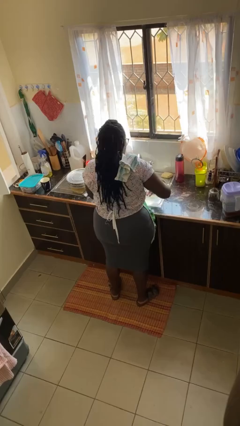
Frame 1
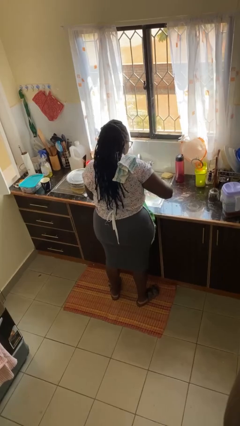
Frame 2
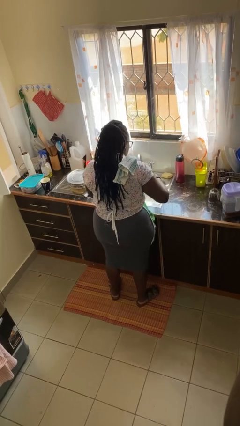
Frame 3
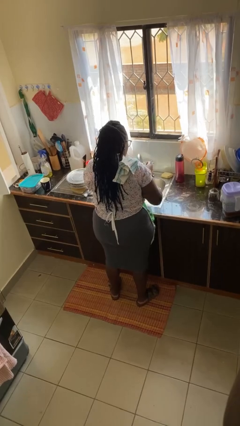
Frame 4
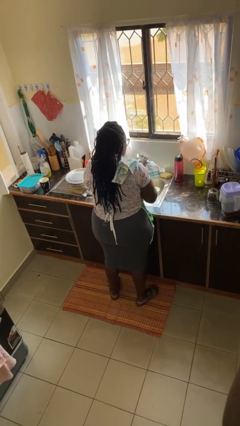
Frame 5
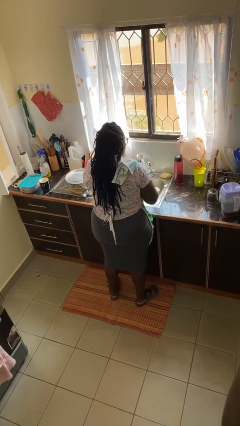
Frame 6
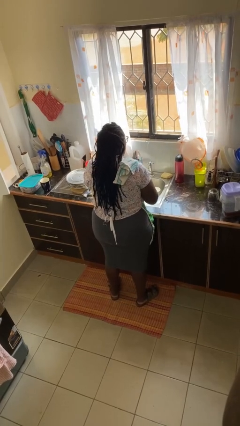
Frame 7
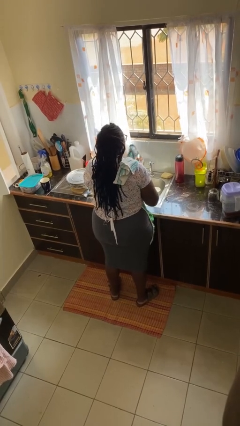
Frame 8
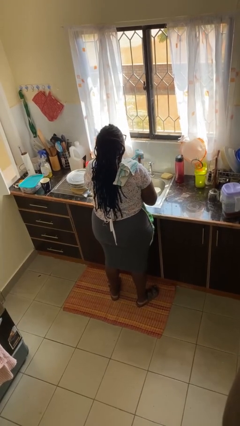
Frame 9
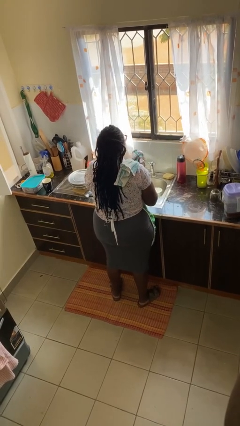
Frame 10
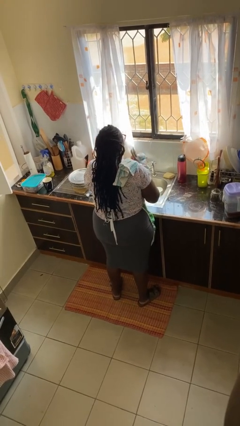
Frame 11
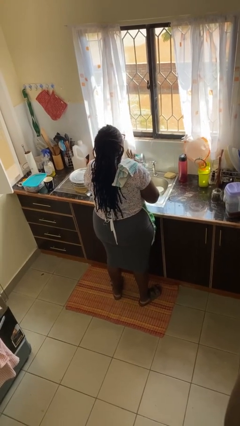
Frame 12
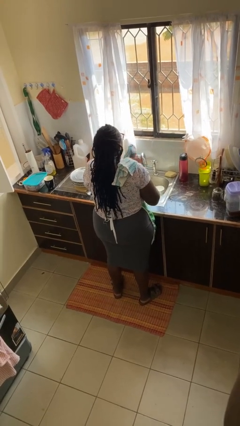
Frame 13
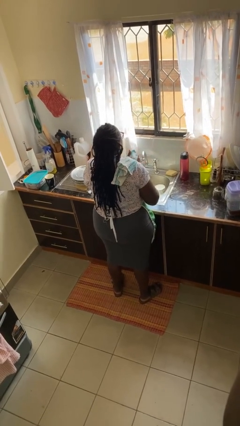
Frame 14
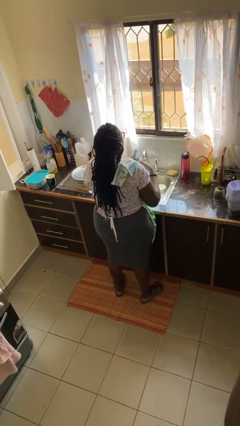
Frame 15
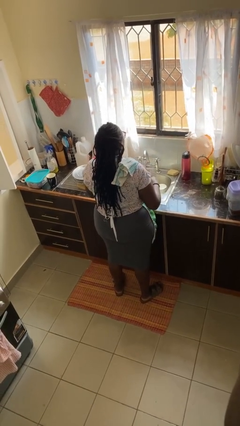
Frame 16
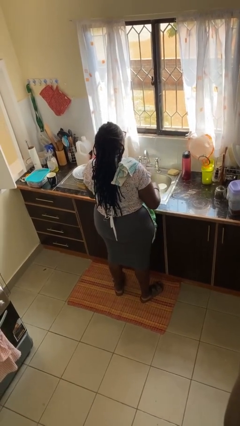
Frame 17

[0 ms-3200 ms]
person dries hands with towel

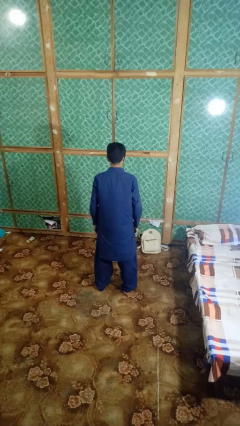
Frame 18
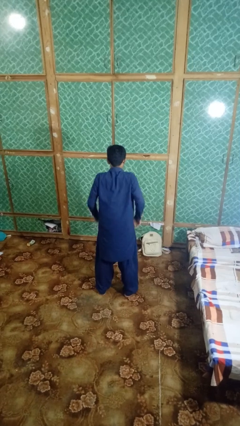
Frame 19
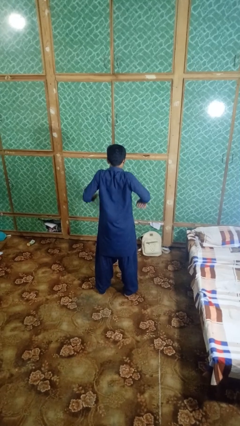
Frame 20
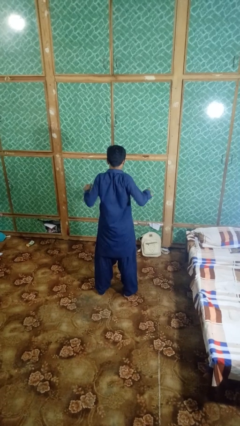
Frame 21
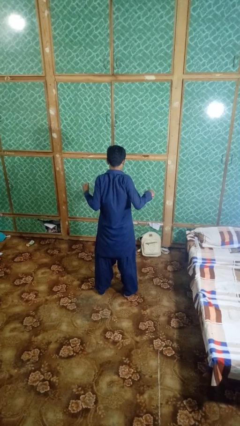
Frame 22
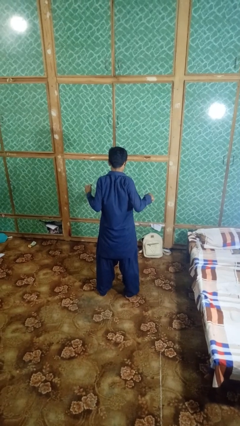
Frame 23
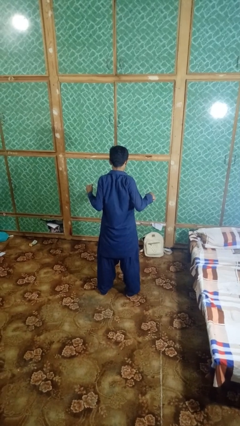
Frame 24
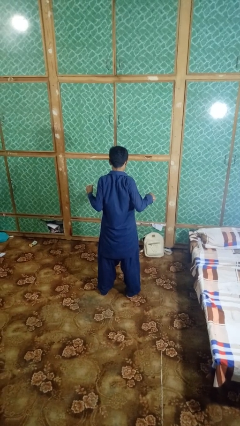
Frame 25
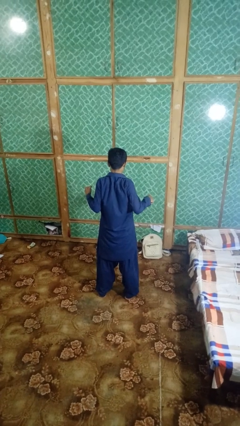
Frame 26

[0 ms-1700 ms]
person stretches back

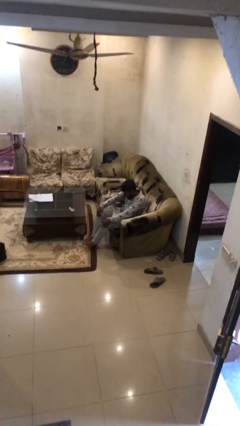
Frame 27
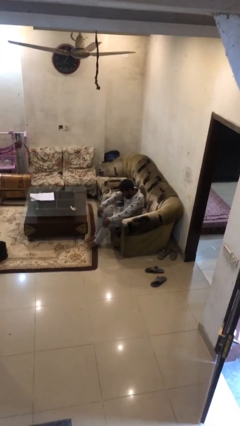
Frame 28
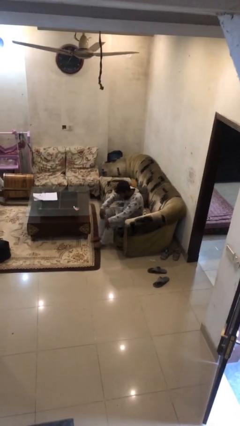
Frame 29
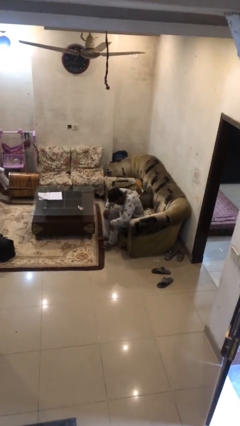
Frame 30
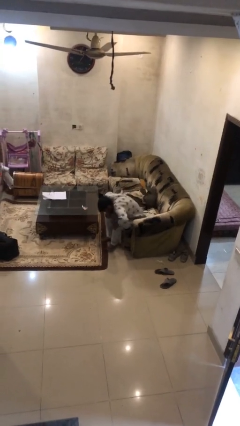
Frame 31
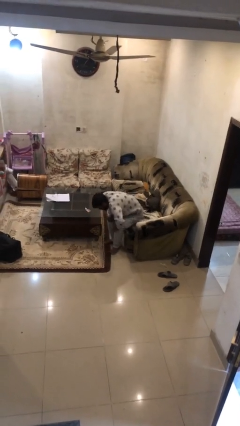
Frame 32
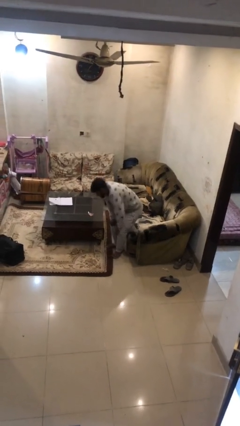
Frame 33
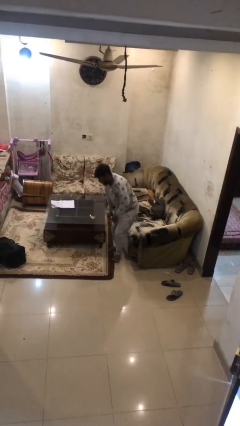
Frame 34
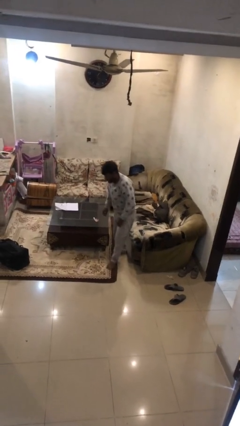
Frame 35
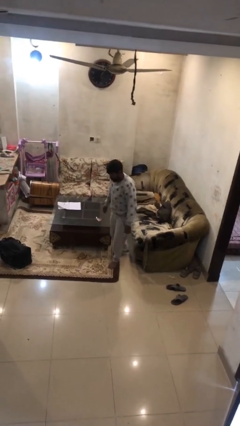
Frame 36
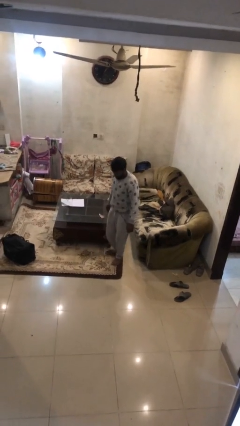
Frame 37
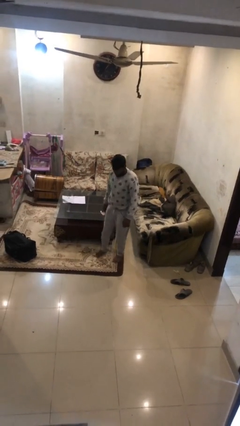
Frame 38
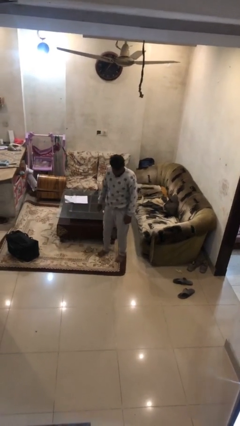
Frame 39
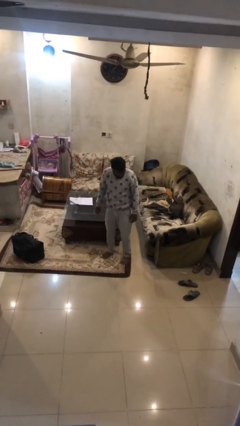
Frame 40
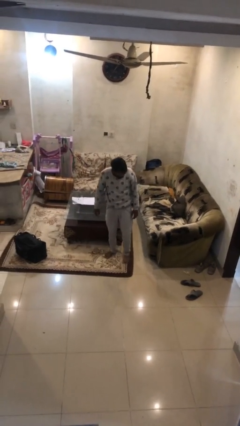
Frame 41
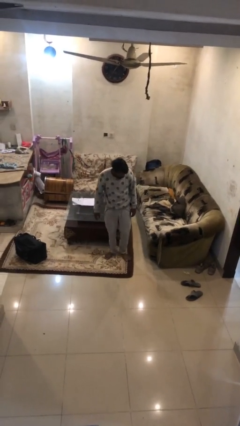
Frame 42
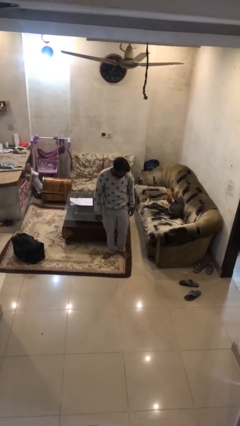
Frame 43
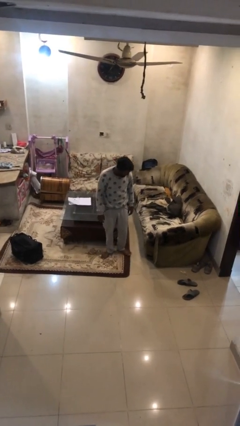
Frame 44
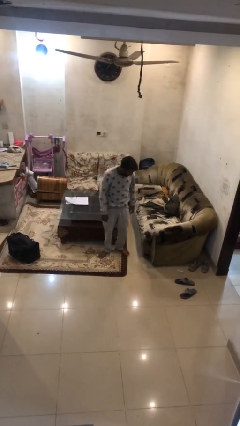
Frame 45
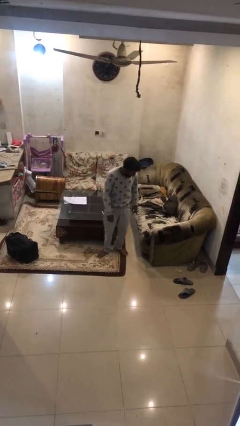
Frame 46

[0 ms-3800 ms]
person stands up

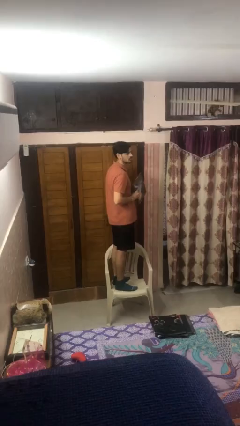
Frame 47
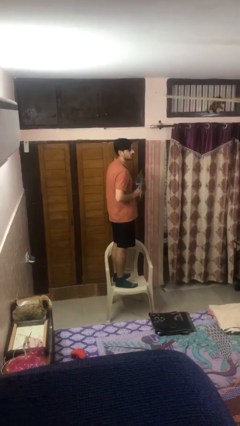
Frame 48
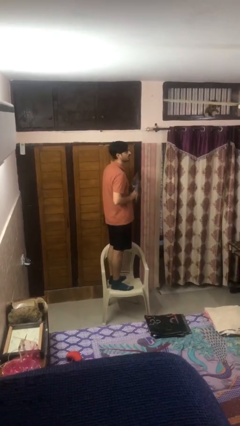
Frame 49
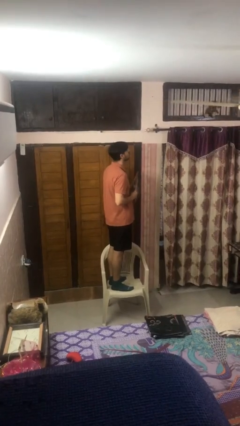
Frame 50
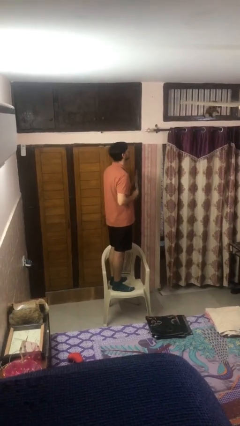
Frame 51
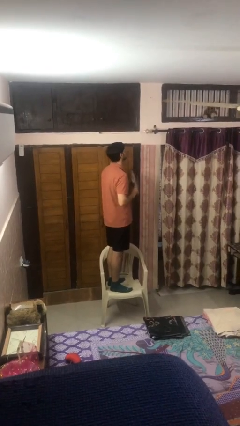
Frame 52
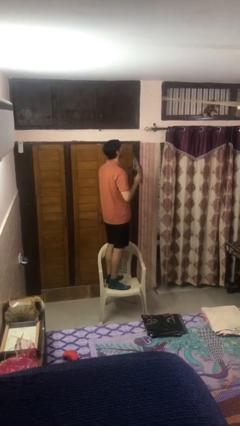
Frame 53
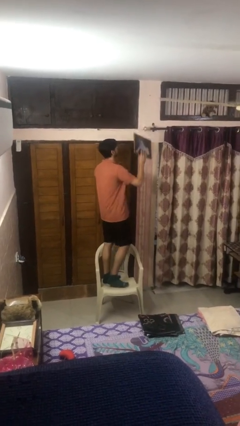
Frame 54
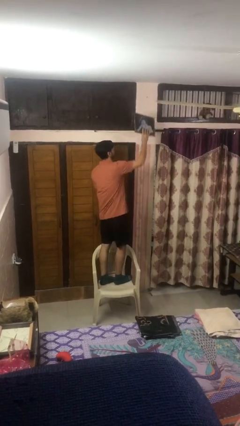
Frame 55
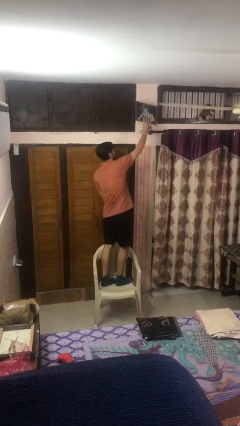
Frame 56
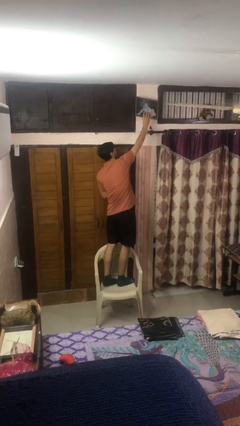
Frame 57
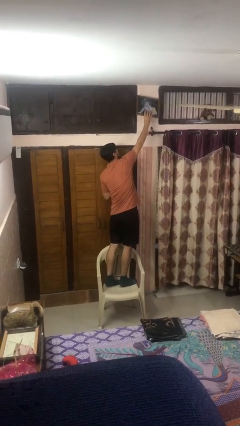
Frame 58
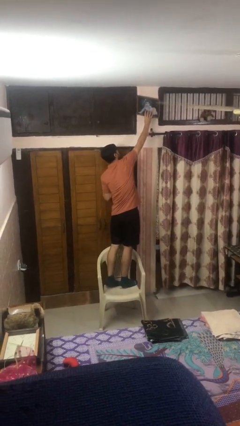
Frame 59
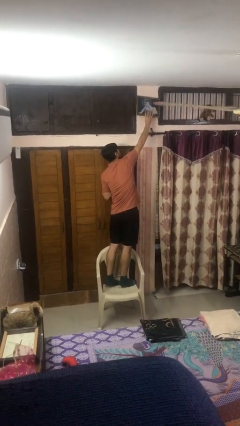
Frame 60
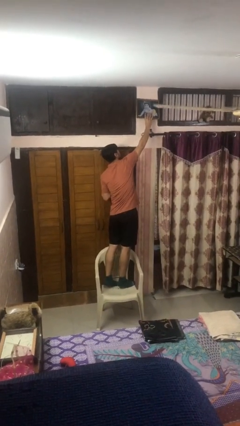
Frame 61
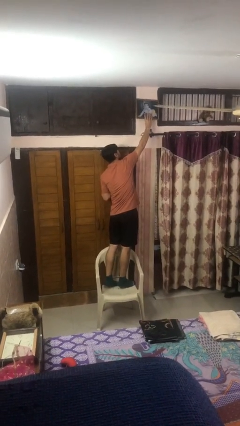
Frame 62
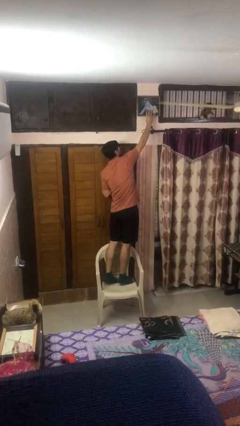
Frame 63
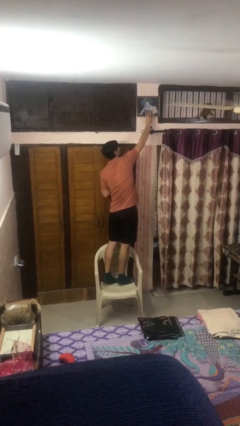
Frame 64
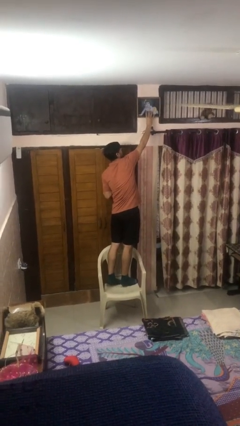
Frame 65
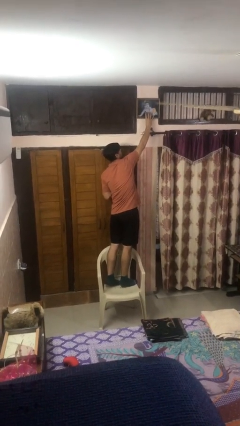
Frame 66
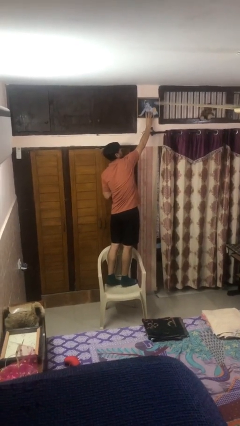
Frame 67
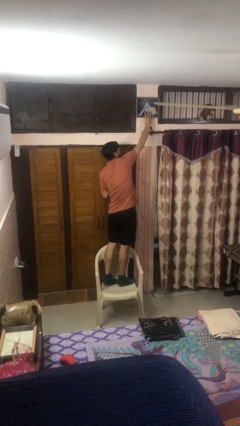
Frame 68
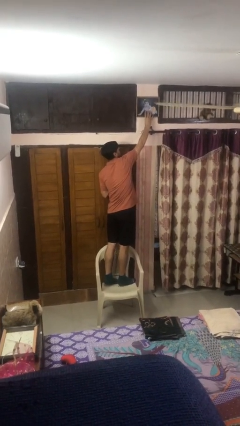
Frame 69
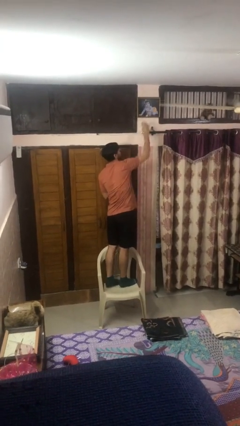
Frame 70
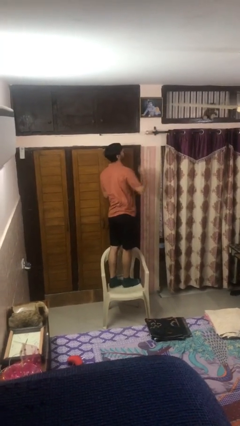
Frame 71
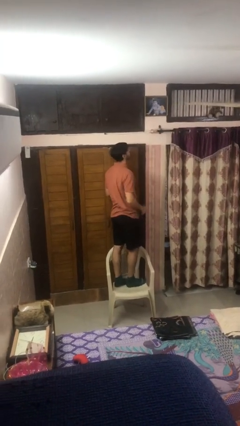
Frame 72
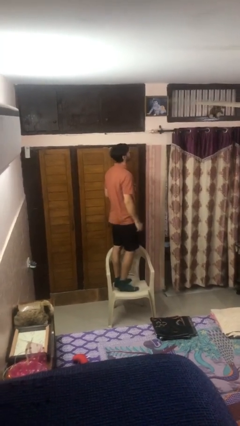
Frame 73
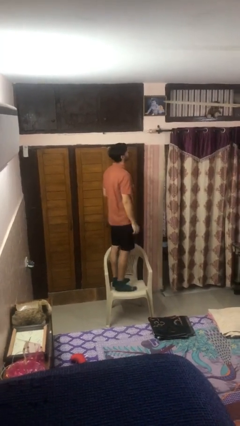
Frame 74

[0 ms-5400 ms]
person puts up picture frame

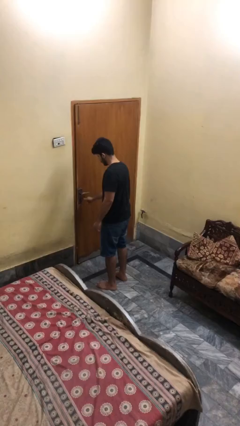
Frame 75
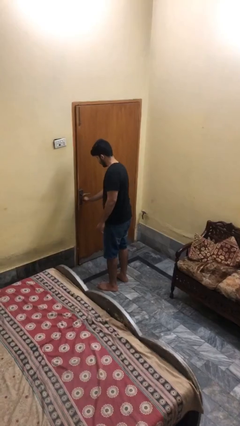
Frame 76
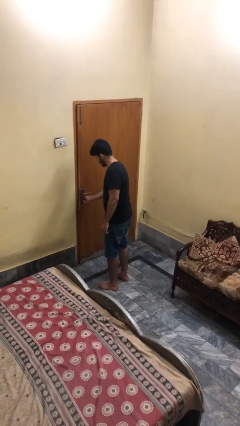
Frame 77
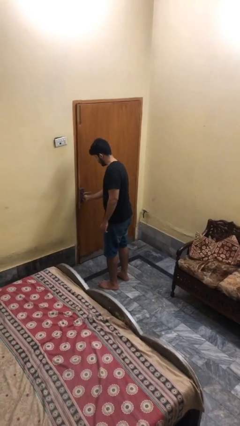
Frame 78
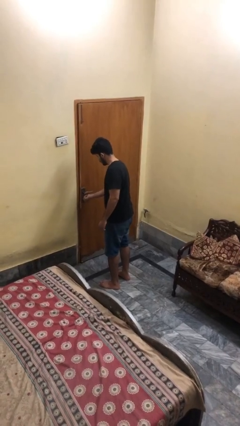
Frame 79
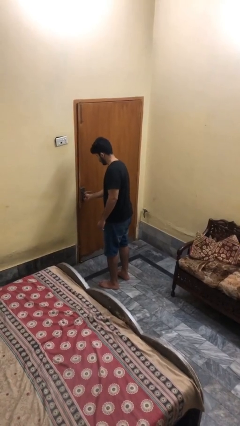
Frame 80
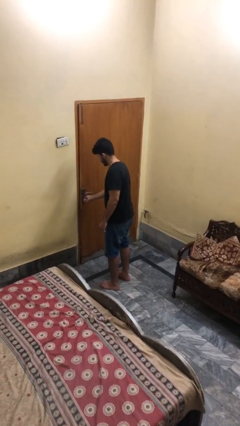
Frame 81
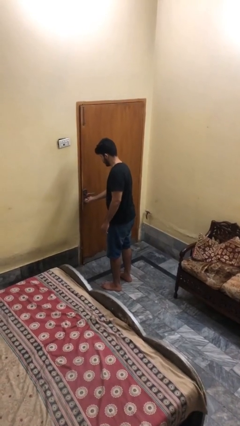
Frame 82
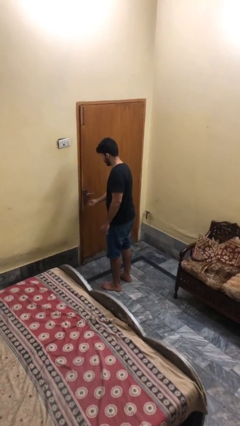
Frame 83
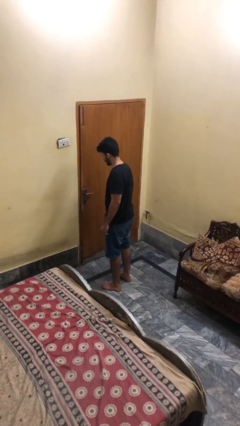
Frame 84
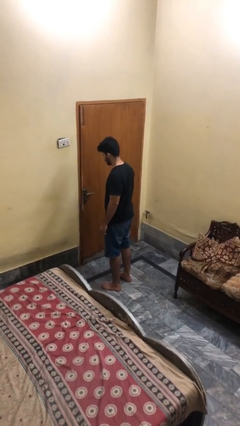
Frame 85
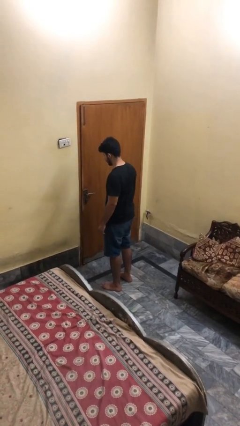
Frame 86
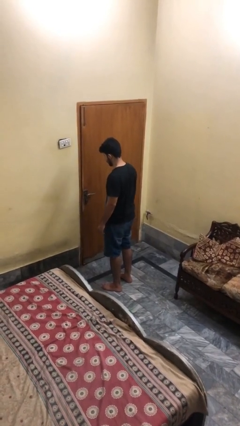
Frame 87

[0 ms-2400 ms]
person unlocks door with keys

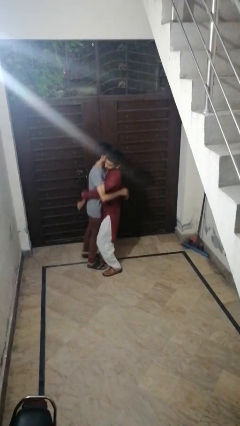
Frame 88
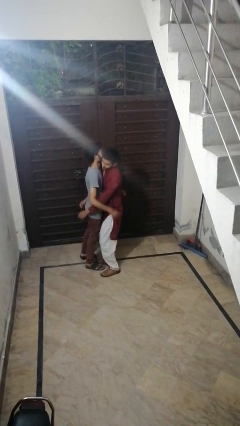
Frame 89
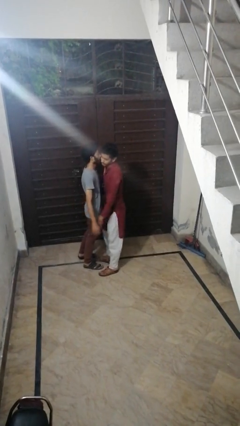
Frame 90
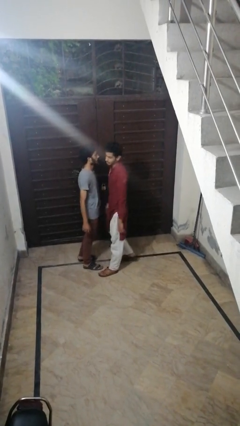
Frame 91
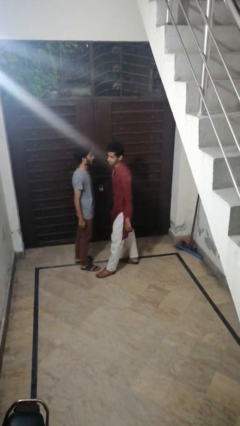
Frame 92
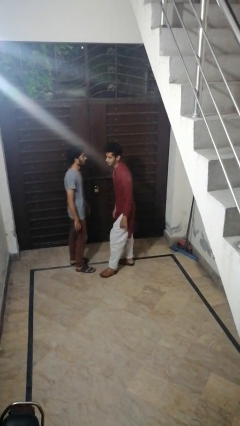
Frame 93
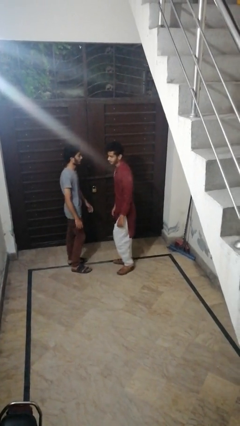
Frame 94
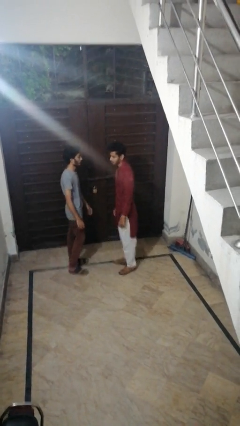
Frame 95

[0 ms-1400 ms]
person puts down person
